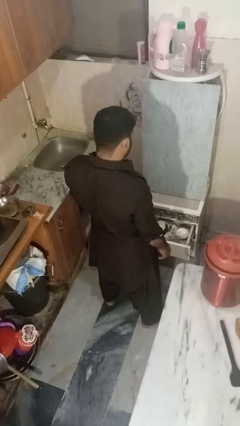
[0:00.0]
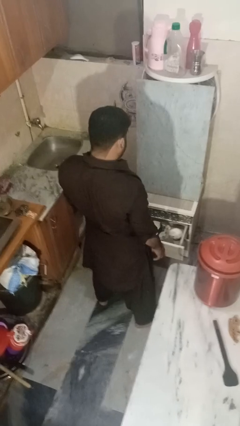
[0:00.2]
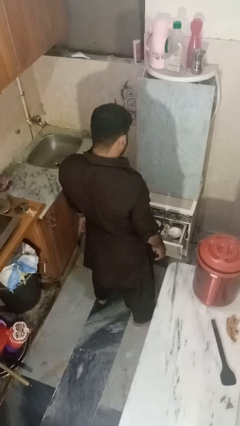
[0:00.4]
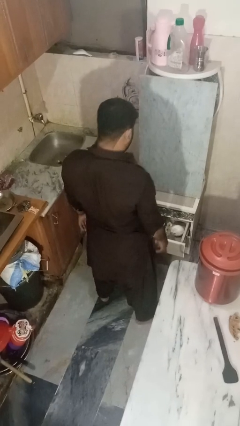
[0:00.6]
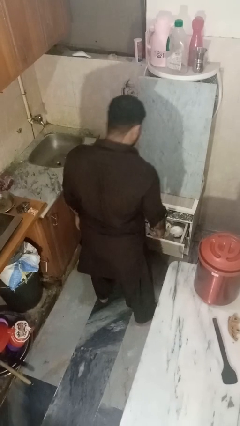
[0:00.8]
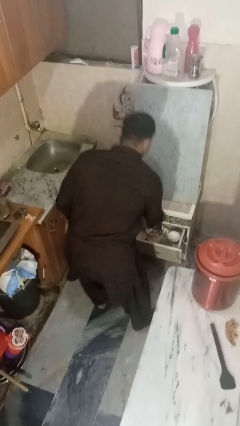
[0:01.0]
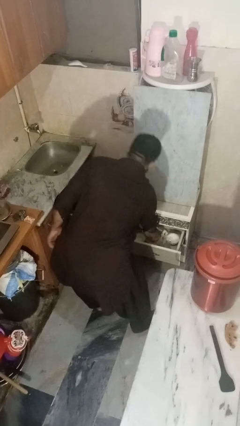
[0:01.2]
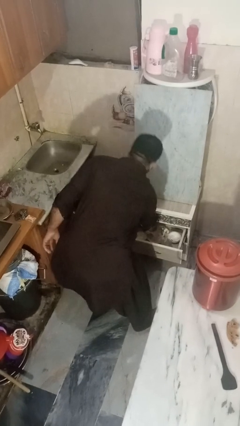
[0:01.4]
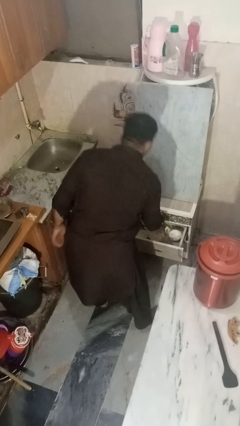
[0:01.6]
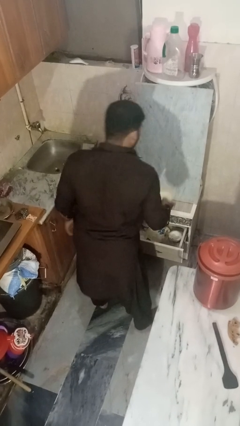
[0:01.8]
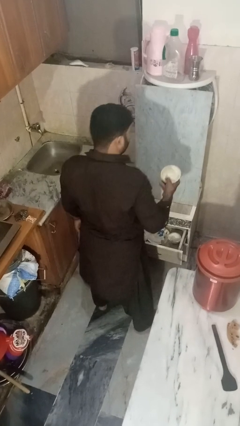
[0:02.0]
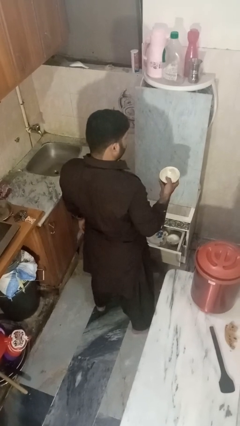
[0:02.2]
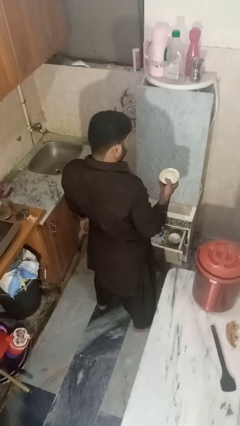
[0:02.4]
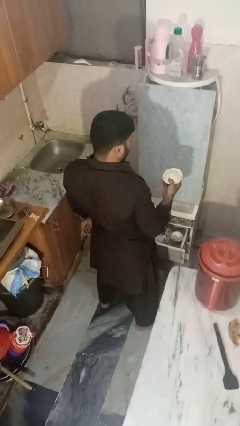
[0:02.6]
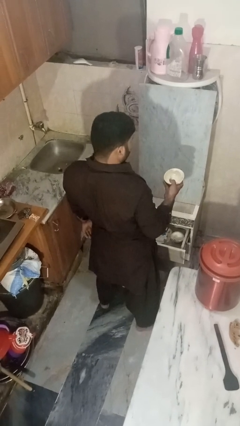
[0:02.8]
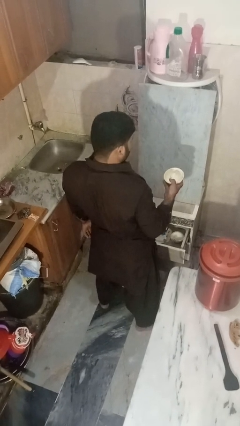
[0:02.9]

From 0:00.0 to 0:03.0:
person takes object from kitchen drawer

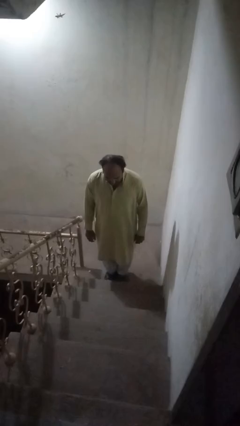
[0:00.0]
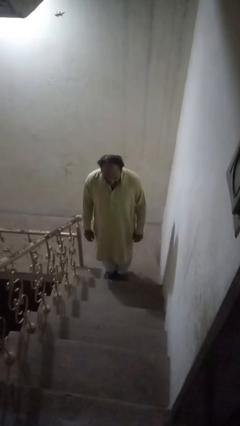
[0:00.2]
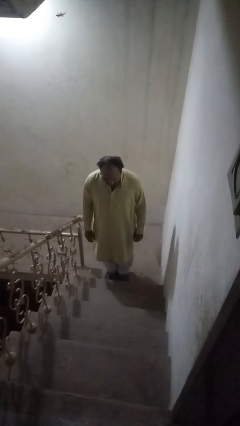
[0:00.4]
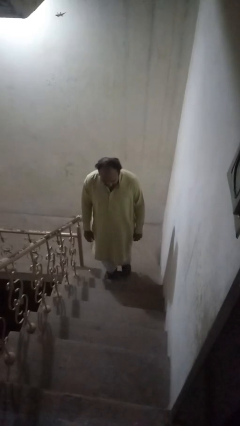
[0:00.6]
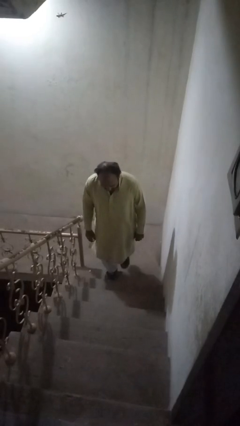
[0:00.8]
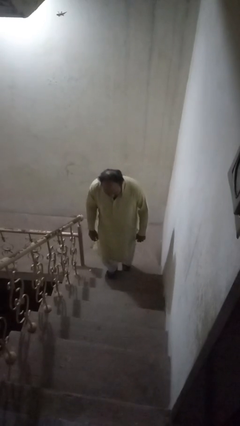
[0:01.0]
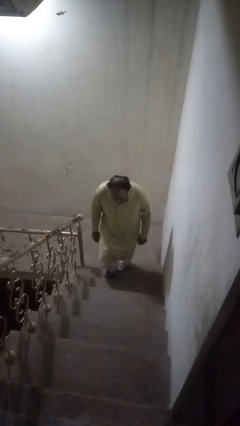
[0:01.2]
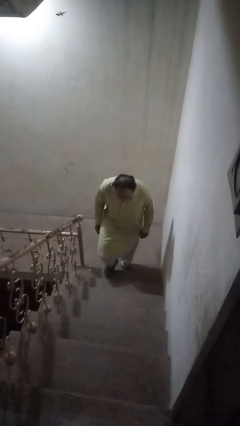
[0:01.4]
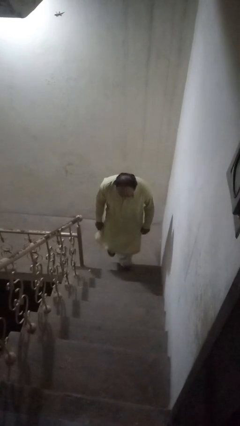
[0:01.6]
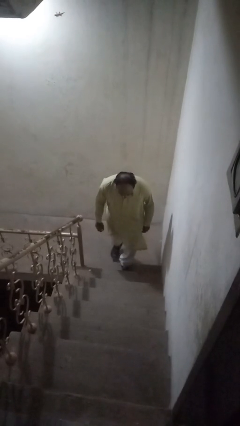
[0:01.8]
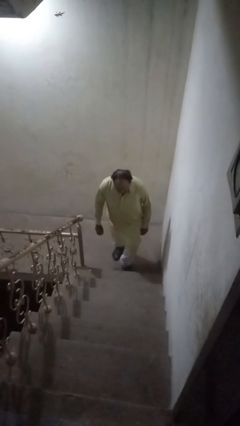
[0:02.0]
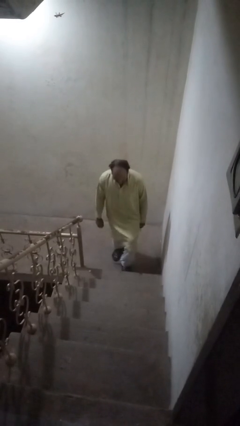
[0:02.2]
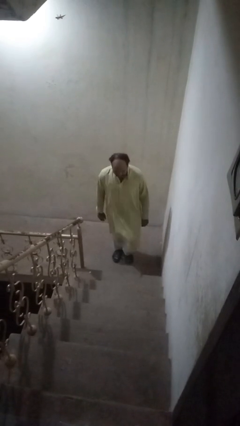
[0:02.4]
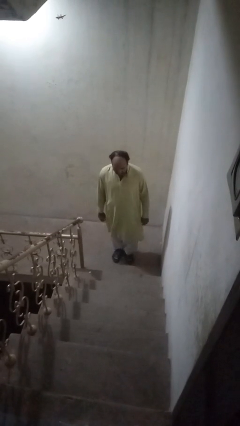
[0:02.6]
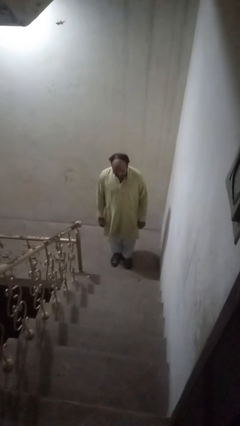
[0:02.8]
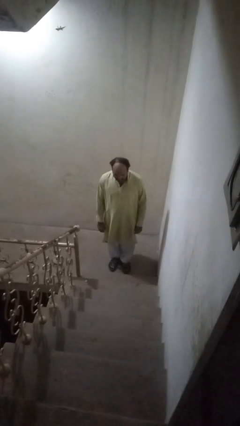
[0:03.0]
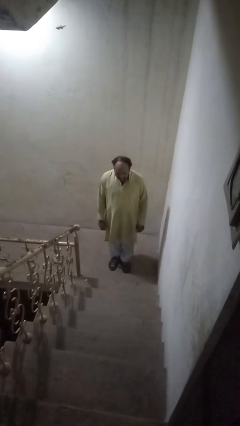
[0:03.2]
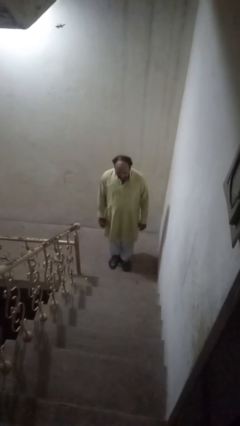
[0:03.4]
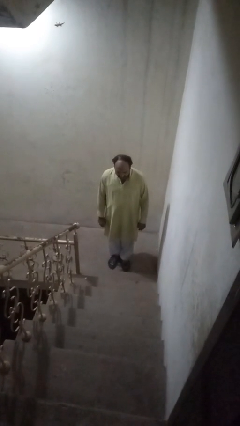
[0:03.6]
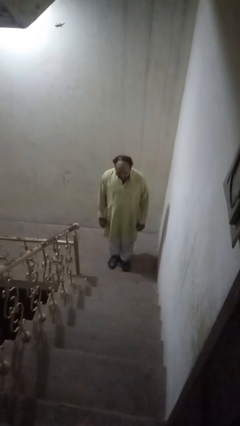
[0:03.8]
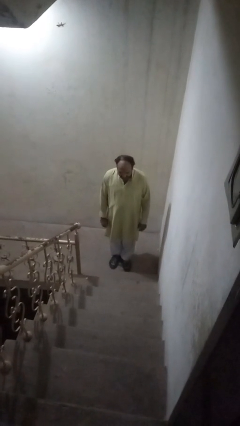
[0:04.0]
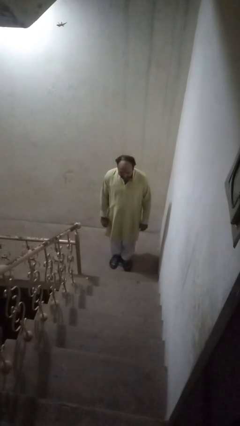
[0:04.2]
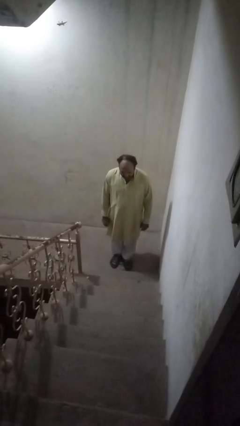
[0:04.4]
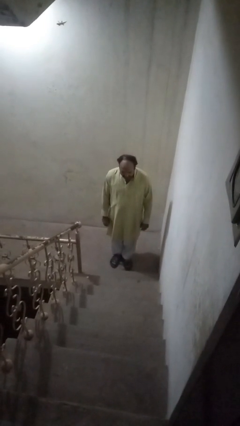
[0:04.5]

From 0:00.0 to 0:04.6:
person climbs down ladder

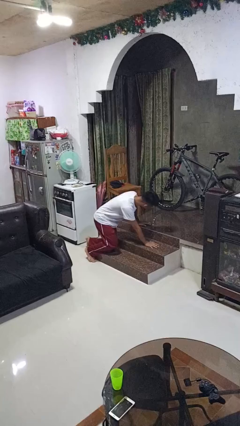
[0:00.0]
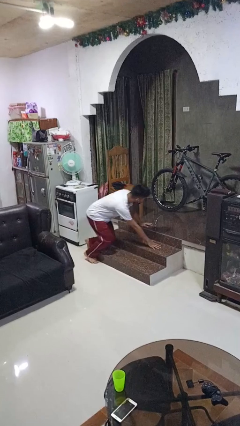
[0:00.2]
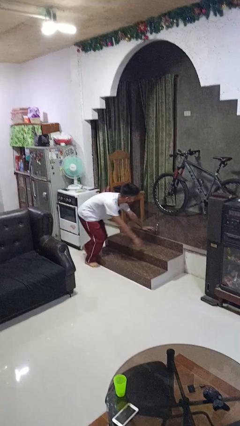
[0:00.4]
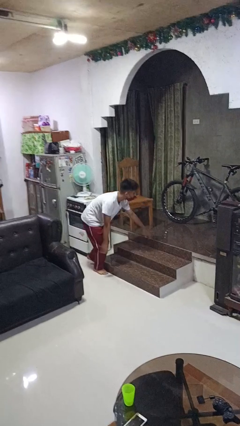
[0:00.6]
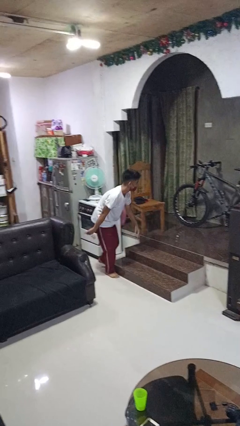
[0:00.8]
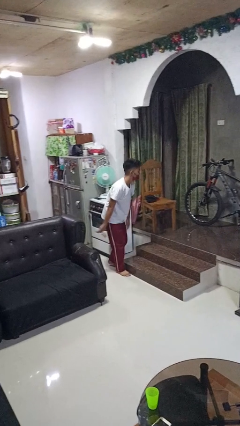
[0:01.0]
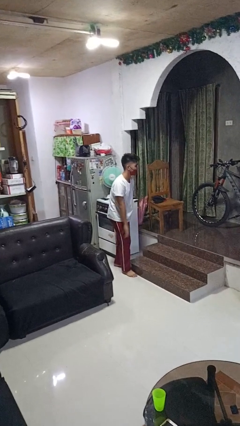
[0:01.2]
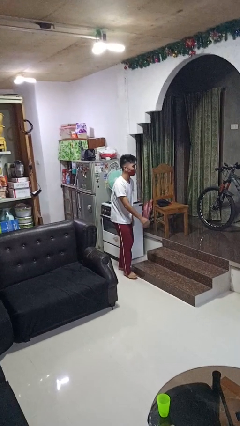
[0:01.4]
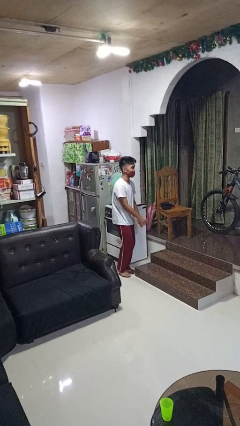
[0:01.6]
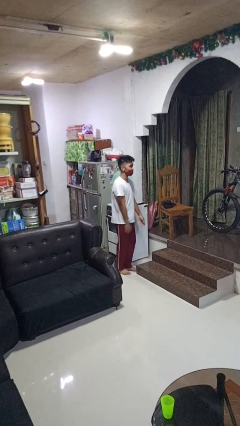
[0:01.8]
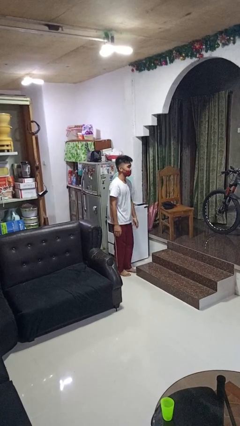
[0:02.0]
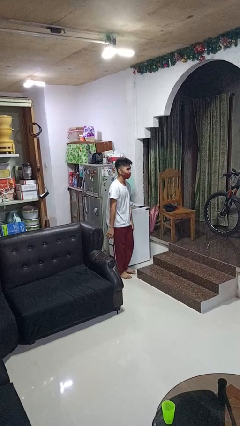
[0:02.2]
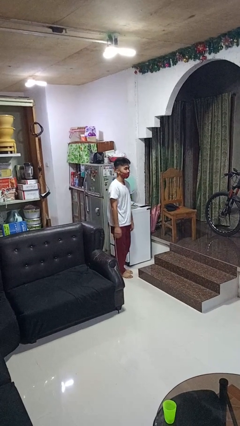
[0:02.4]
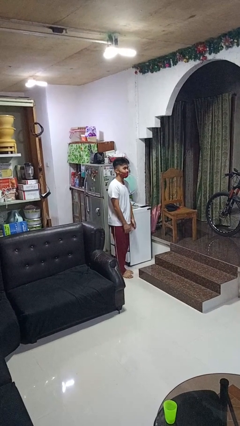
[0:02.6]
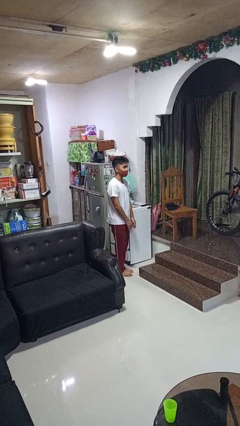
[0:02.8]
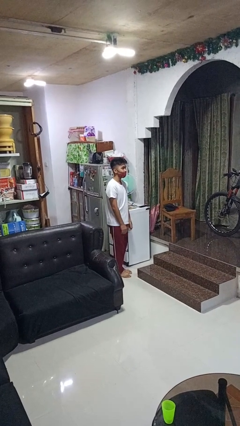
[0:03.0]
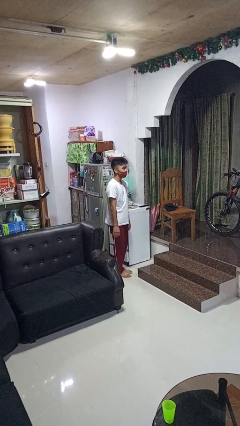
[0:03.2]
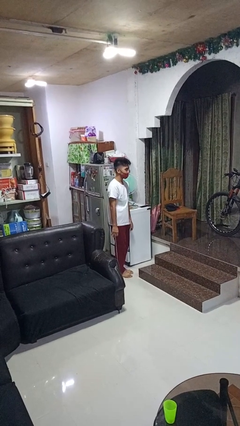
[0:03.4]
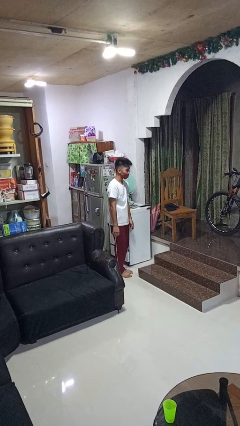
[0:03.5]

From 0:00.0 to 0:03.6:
person stands up from floor

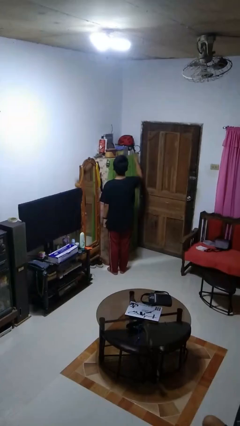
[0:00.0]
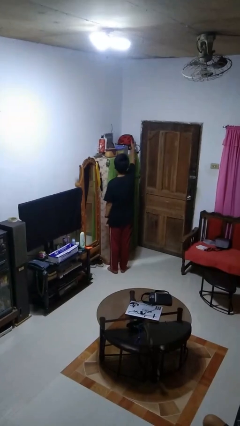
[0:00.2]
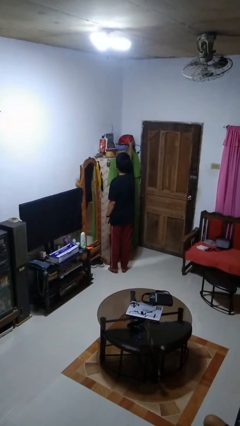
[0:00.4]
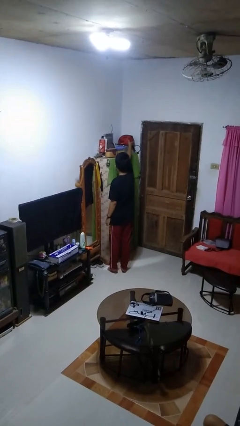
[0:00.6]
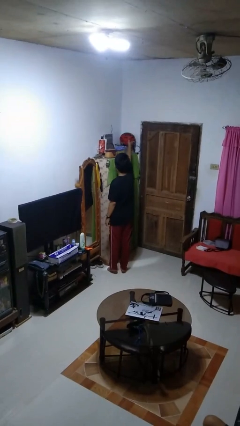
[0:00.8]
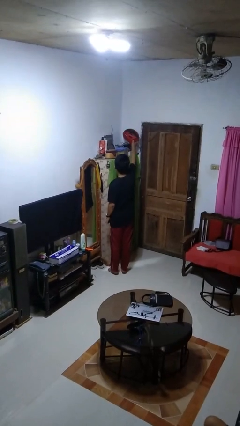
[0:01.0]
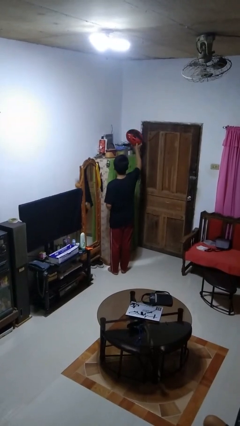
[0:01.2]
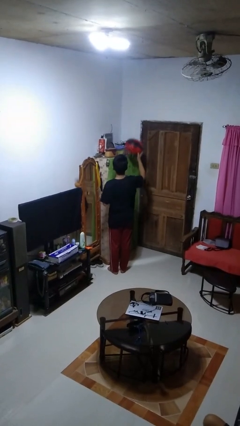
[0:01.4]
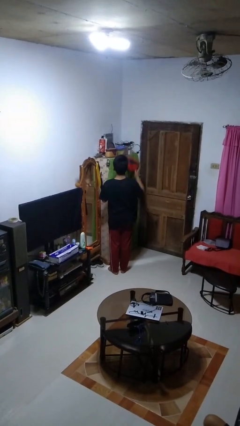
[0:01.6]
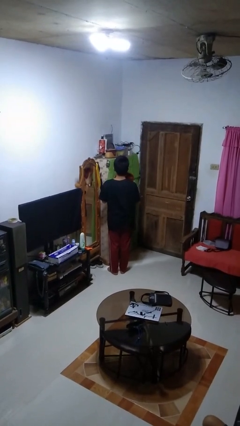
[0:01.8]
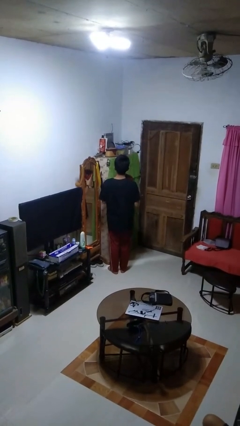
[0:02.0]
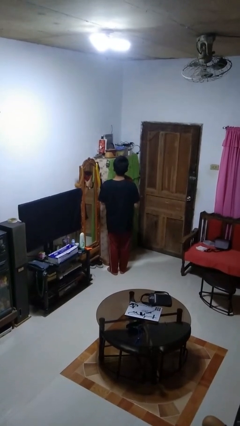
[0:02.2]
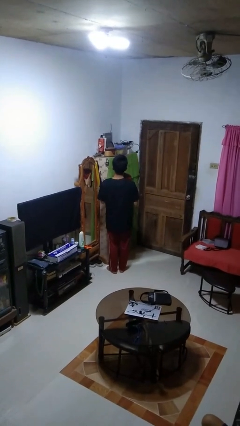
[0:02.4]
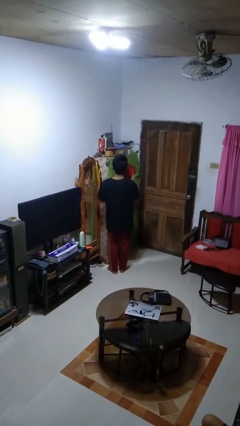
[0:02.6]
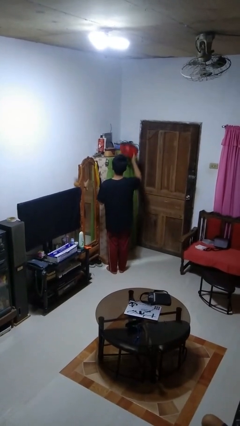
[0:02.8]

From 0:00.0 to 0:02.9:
person picks up object from shelf

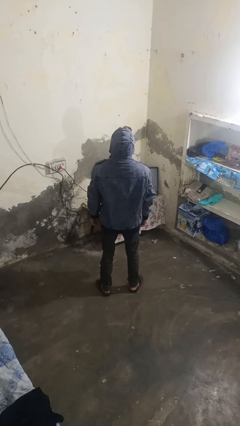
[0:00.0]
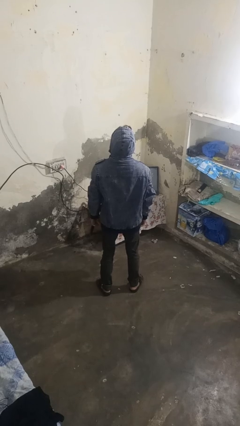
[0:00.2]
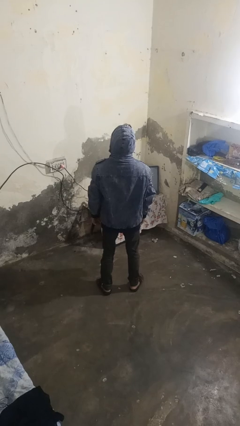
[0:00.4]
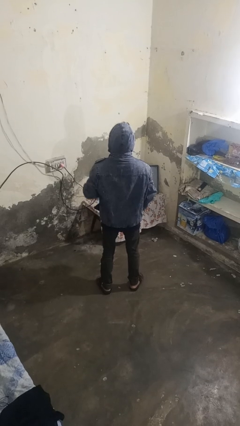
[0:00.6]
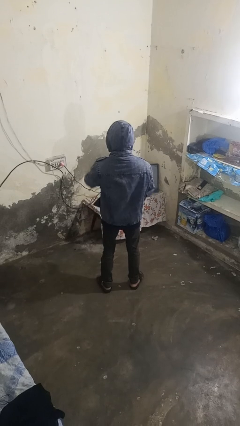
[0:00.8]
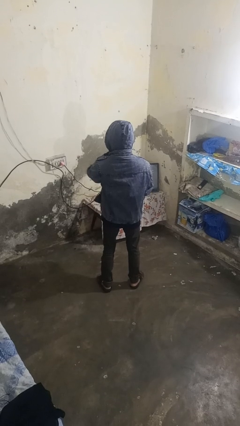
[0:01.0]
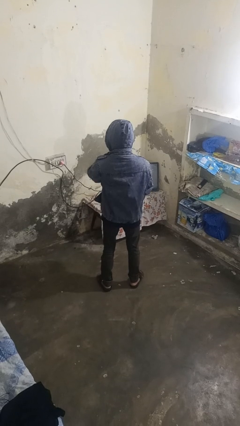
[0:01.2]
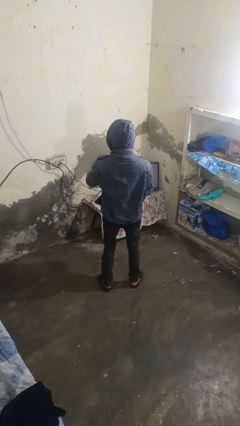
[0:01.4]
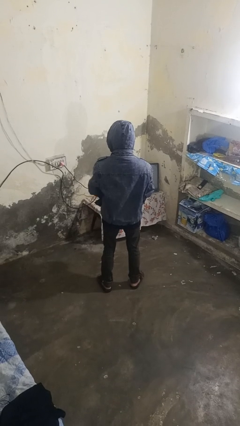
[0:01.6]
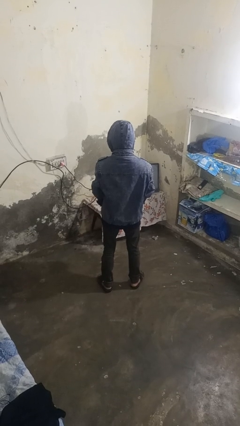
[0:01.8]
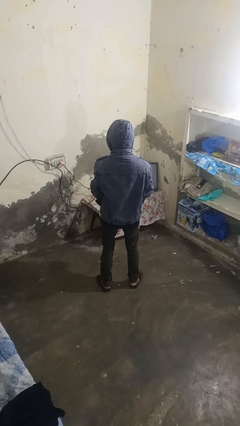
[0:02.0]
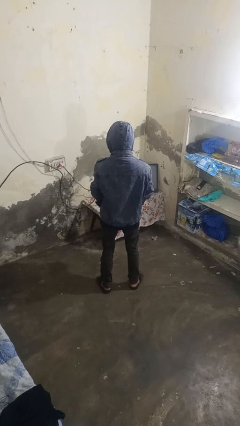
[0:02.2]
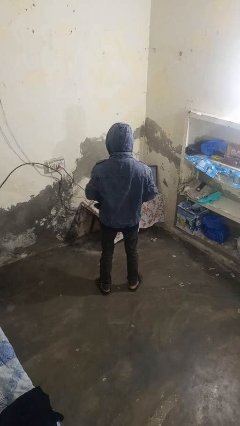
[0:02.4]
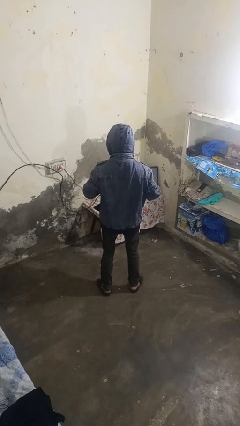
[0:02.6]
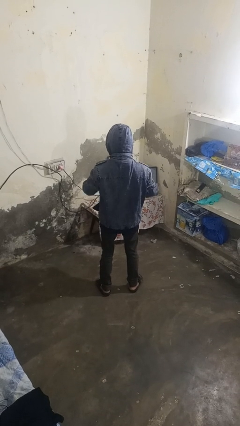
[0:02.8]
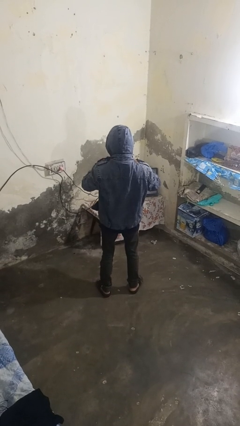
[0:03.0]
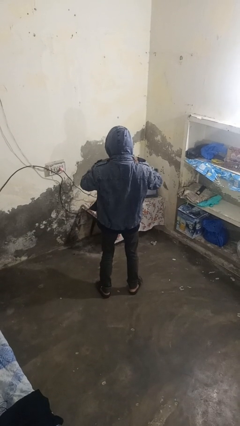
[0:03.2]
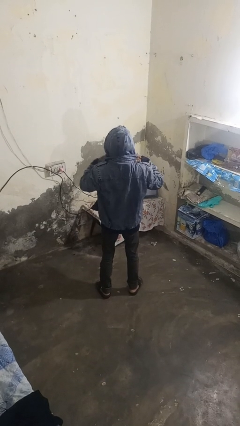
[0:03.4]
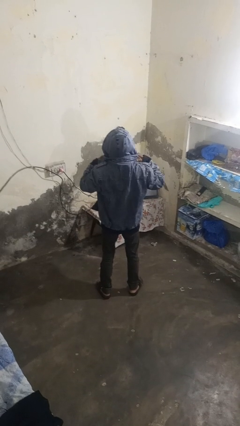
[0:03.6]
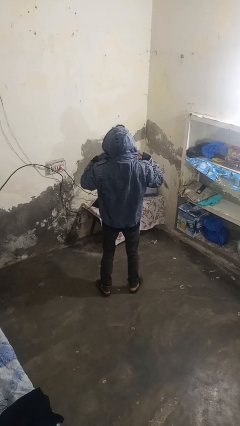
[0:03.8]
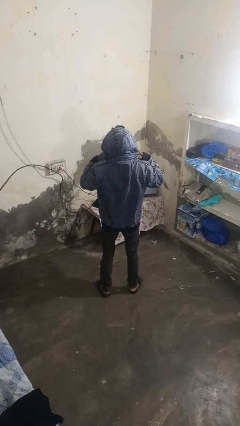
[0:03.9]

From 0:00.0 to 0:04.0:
person unzips jacket
